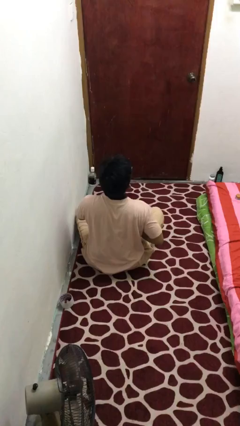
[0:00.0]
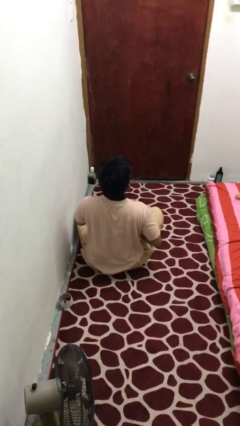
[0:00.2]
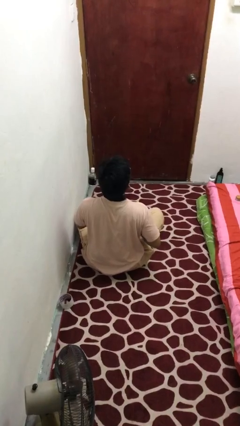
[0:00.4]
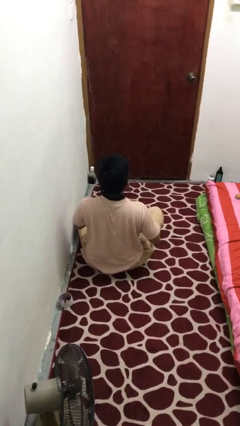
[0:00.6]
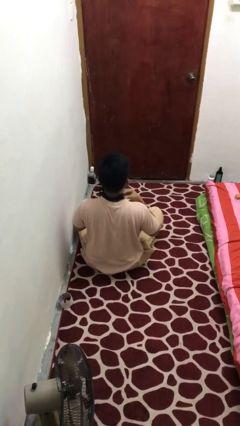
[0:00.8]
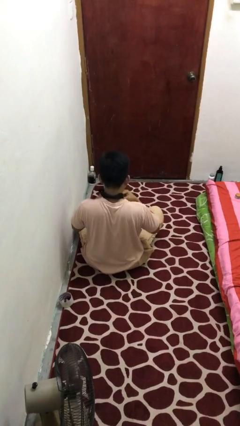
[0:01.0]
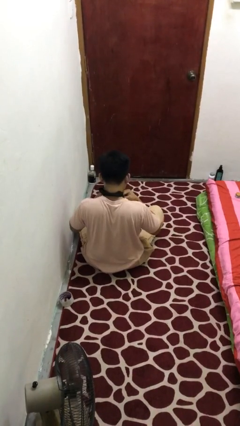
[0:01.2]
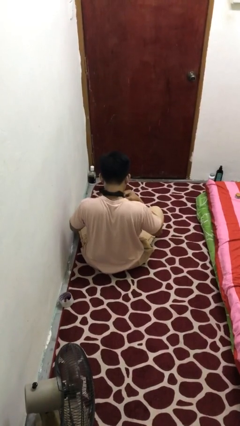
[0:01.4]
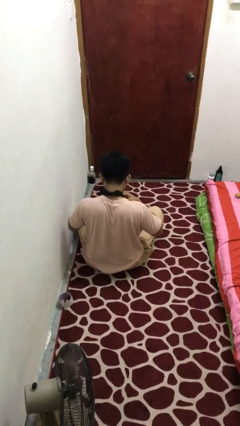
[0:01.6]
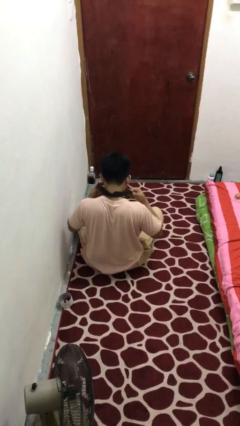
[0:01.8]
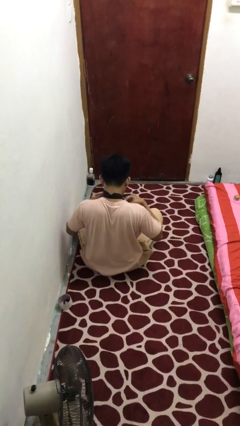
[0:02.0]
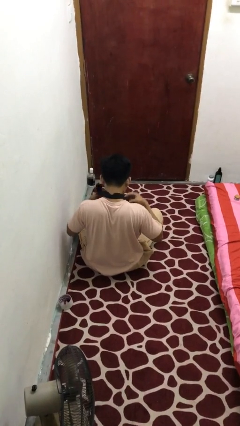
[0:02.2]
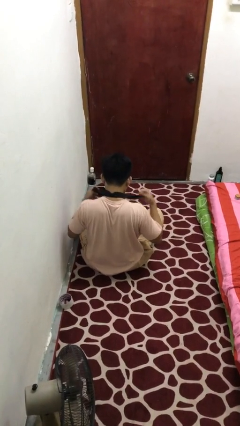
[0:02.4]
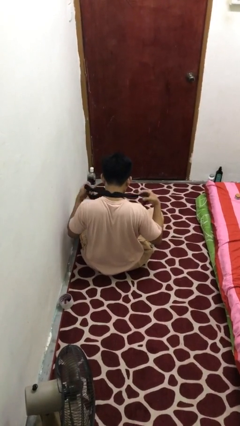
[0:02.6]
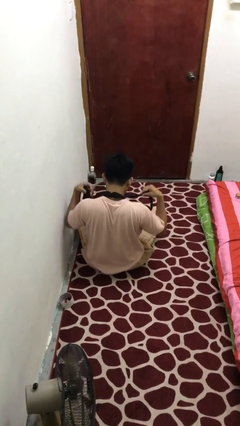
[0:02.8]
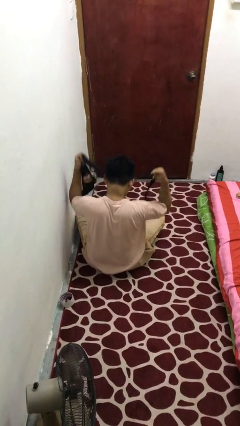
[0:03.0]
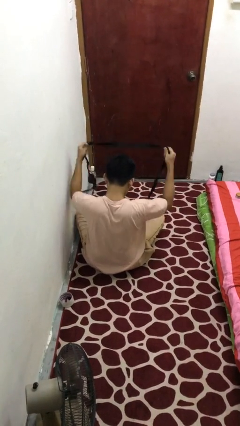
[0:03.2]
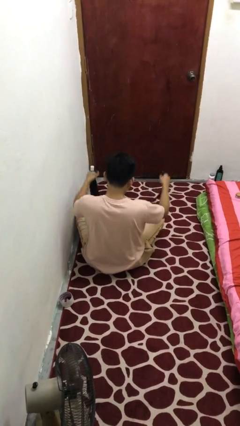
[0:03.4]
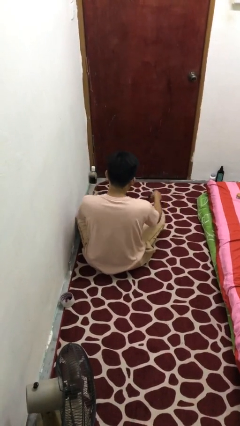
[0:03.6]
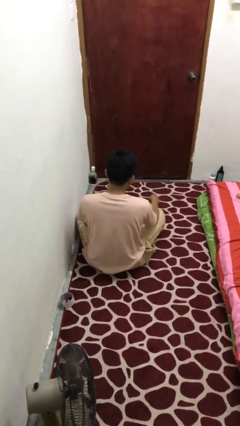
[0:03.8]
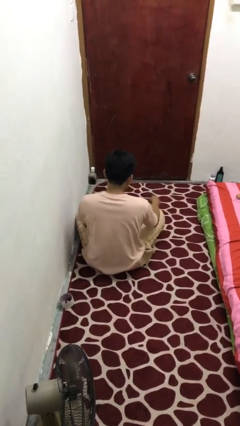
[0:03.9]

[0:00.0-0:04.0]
person takes off necktie

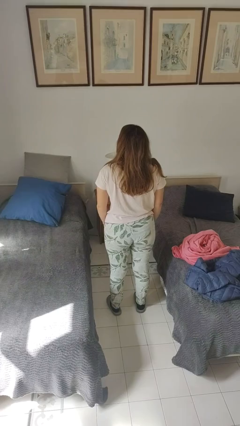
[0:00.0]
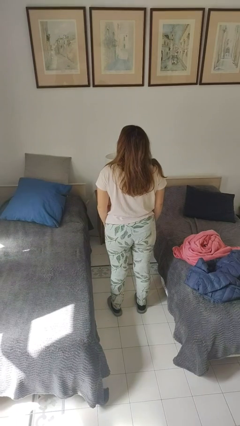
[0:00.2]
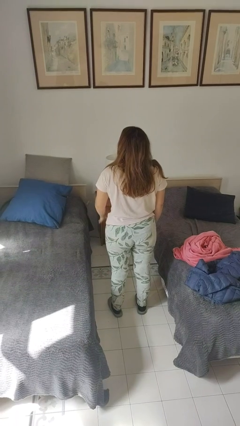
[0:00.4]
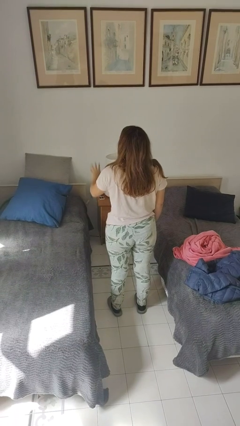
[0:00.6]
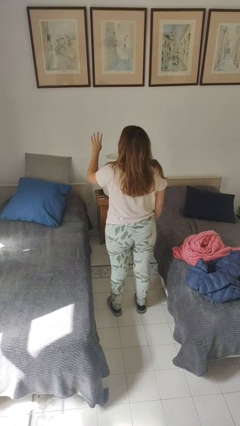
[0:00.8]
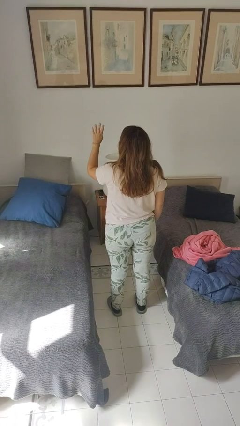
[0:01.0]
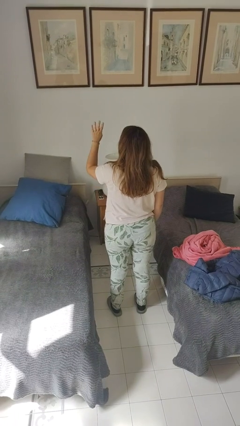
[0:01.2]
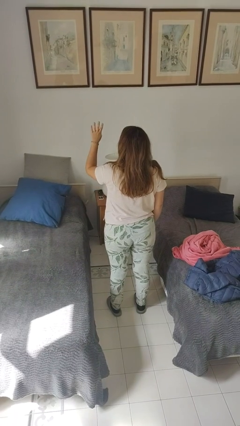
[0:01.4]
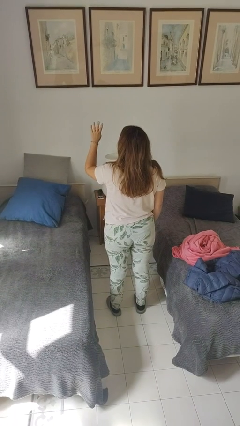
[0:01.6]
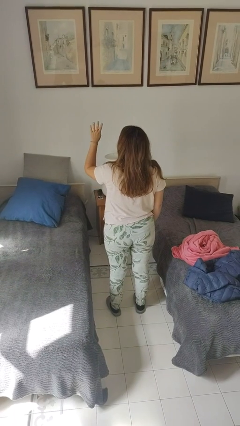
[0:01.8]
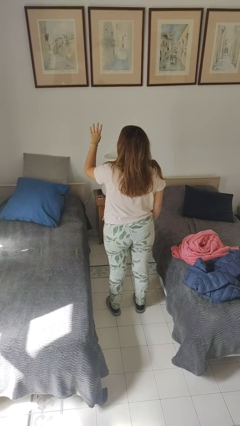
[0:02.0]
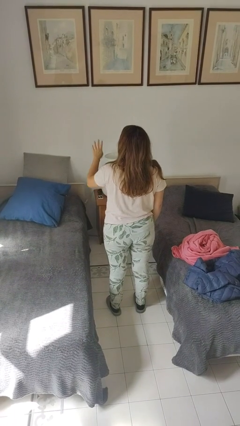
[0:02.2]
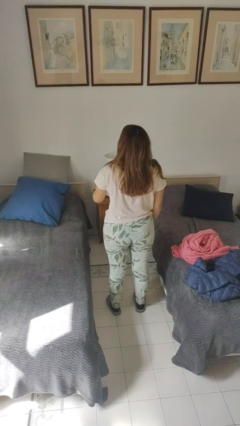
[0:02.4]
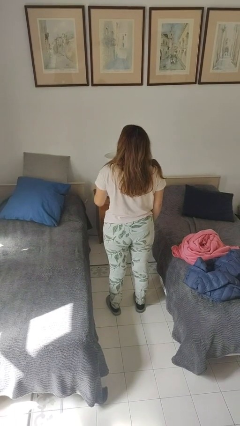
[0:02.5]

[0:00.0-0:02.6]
person gestures number four

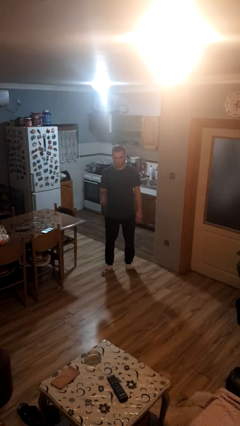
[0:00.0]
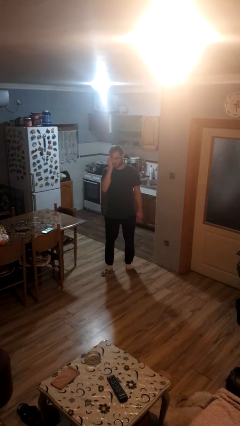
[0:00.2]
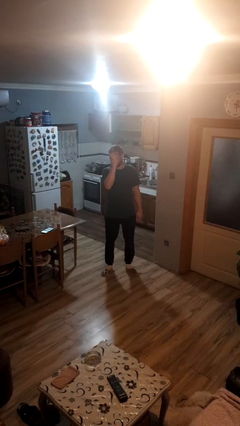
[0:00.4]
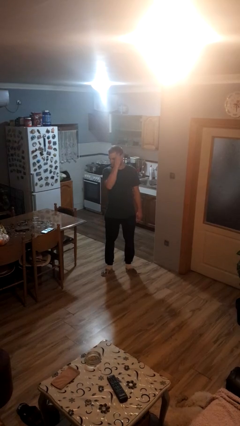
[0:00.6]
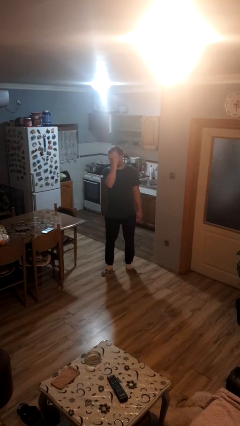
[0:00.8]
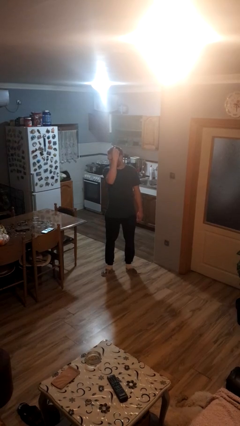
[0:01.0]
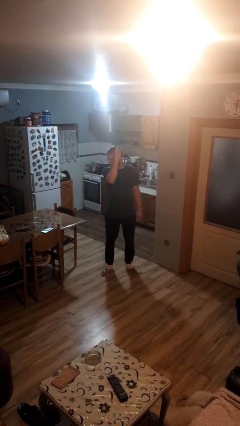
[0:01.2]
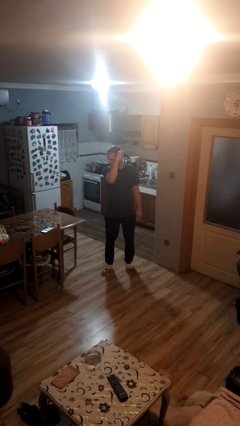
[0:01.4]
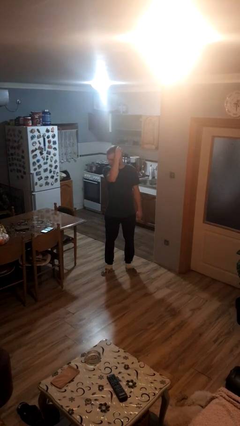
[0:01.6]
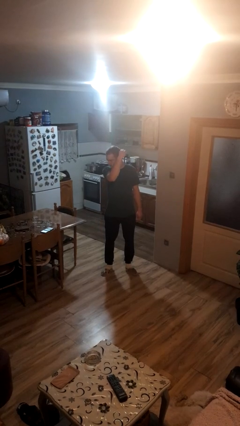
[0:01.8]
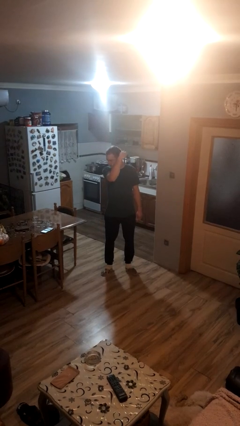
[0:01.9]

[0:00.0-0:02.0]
person brushes hair

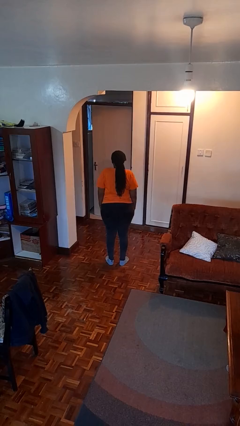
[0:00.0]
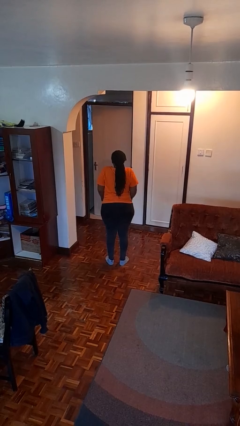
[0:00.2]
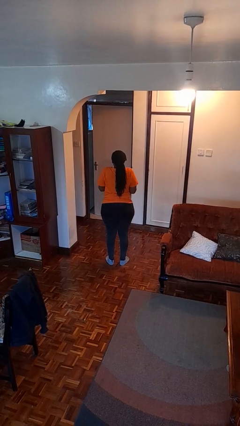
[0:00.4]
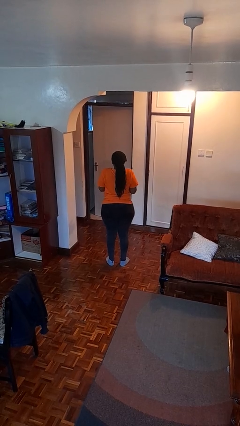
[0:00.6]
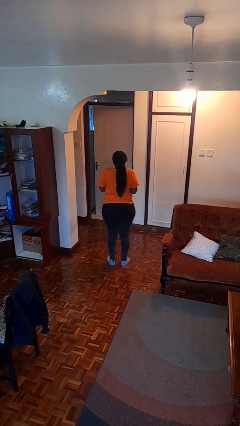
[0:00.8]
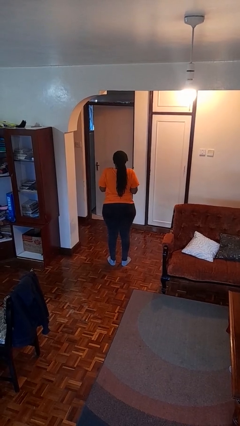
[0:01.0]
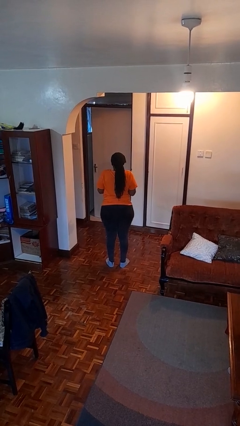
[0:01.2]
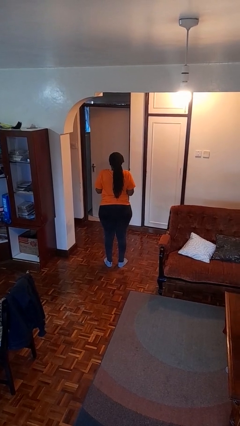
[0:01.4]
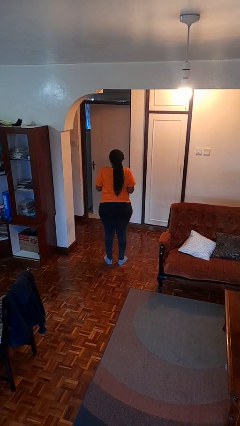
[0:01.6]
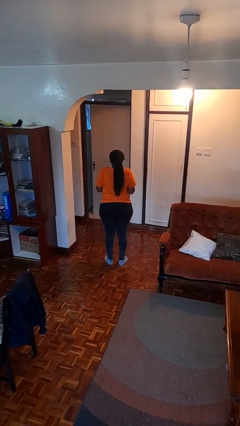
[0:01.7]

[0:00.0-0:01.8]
person shrugs

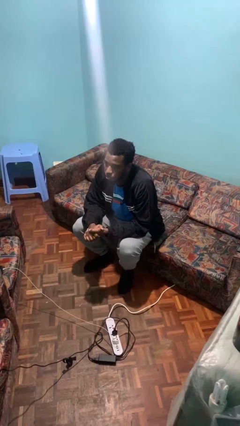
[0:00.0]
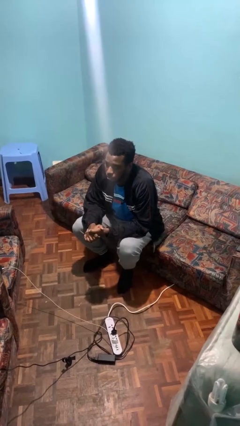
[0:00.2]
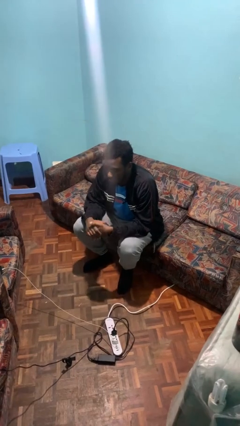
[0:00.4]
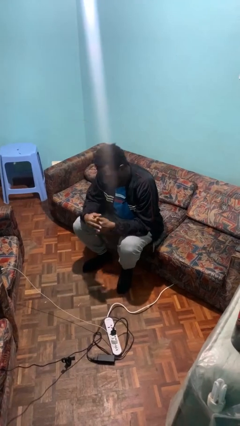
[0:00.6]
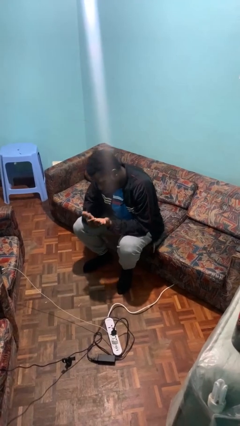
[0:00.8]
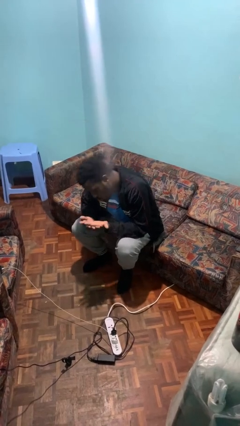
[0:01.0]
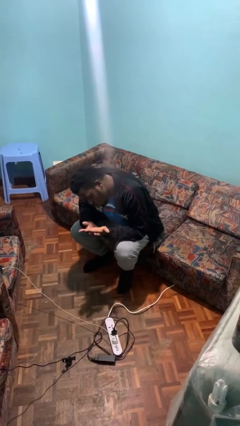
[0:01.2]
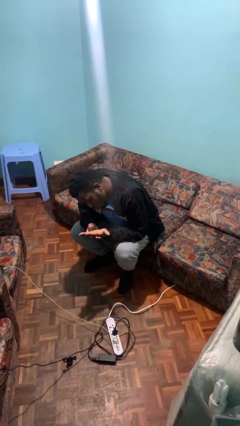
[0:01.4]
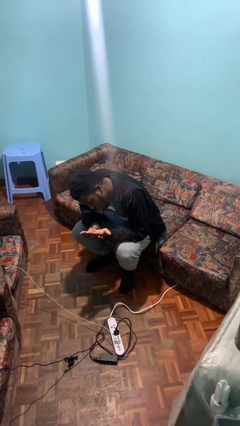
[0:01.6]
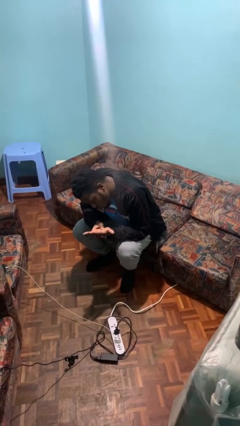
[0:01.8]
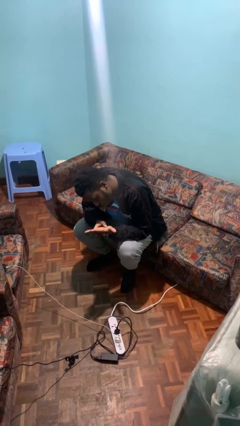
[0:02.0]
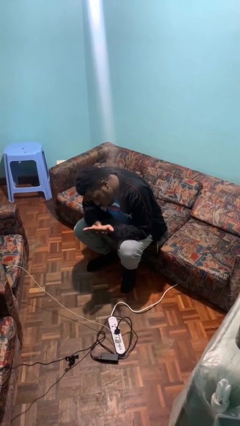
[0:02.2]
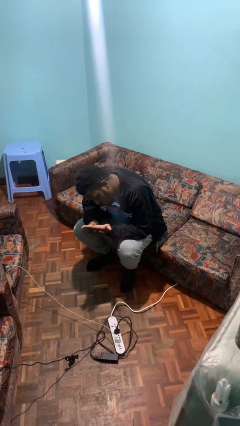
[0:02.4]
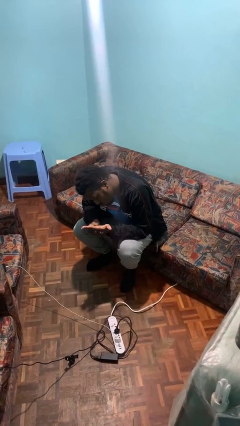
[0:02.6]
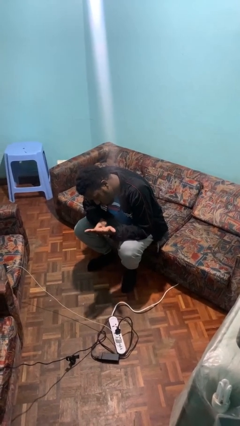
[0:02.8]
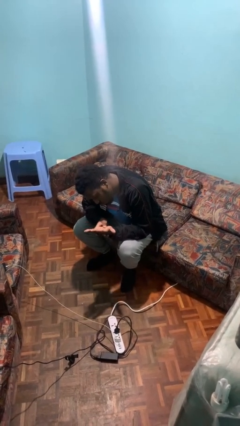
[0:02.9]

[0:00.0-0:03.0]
person looks at hands in lap

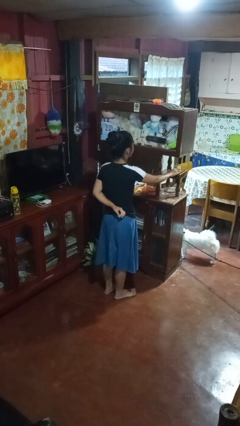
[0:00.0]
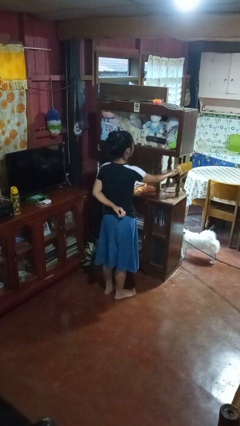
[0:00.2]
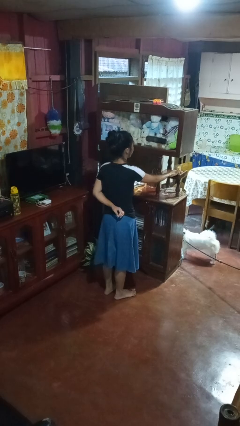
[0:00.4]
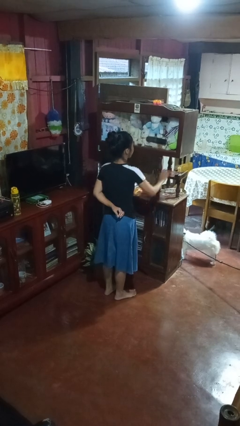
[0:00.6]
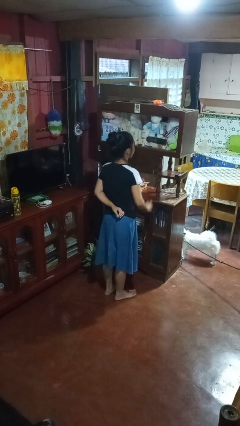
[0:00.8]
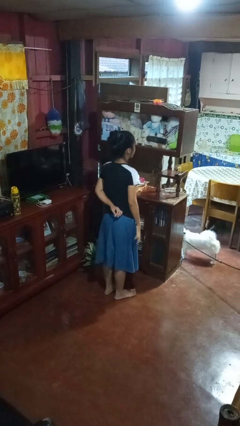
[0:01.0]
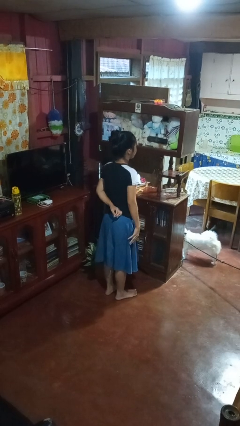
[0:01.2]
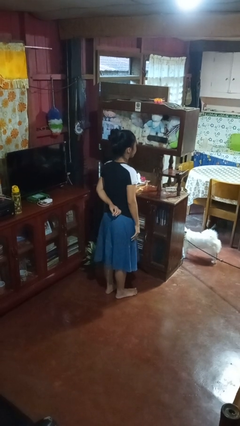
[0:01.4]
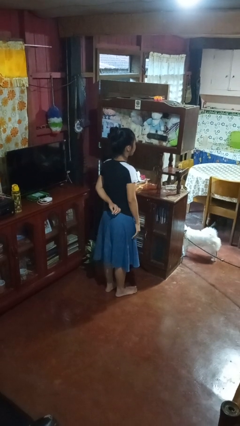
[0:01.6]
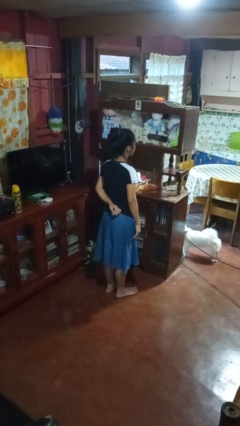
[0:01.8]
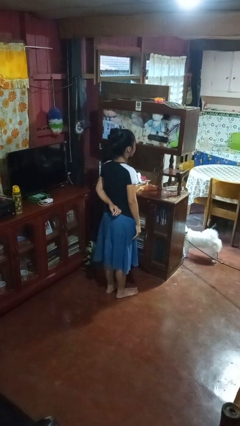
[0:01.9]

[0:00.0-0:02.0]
person puts down object on shelf

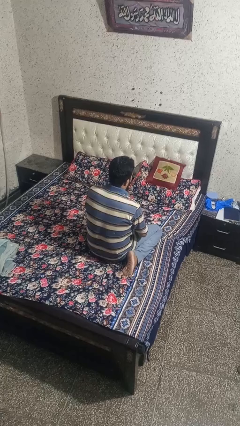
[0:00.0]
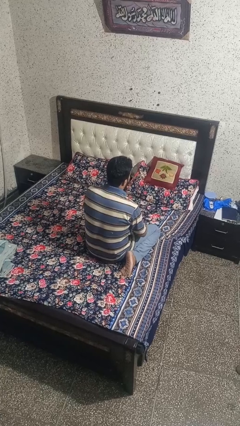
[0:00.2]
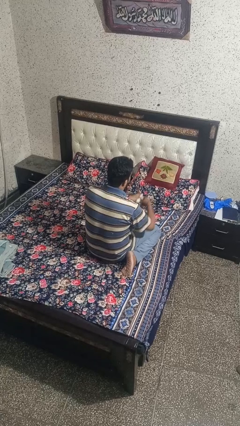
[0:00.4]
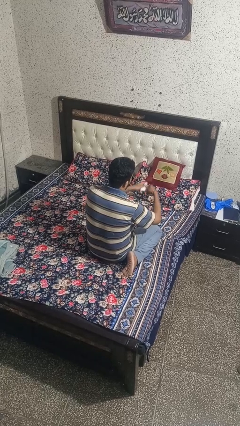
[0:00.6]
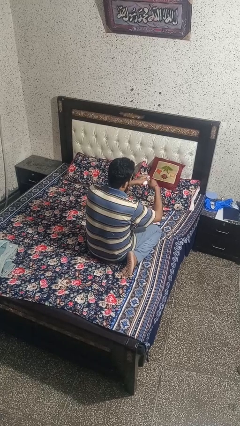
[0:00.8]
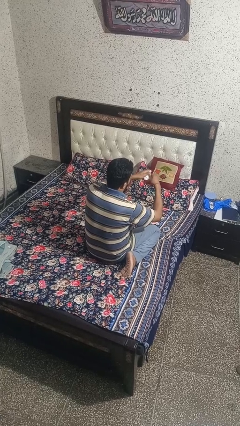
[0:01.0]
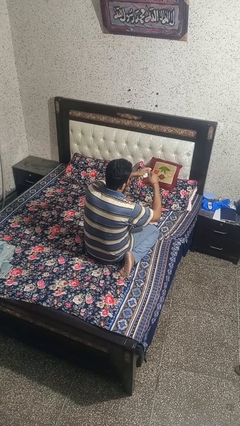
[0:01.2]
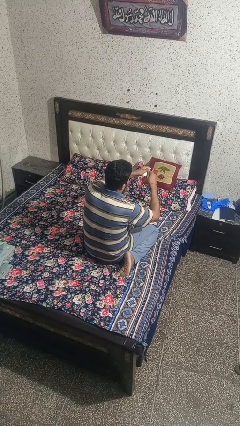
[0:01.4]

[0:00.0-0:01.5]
person tears paper

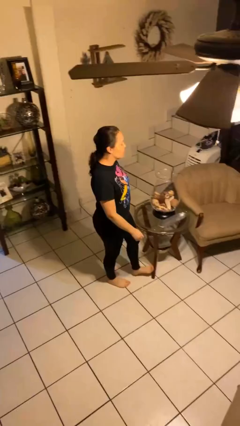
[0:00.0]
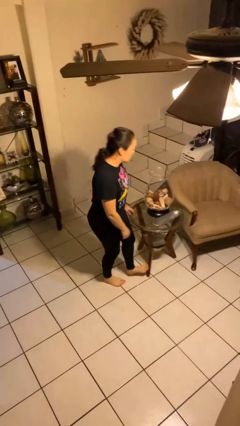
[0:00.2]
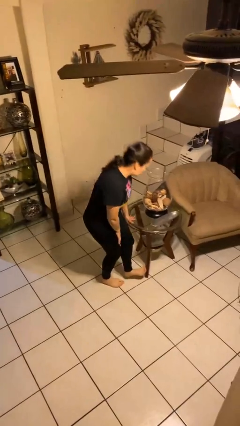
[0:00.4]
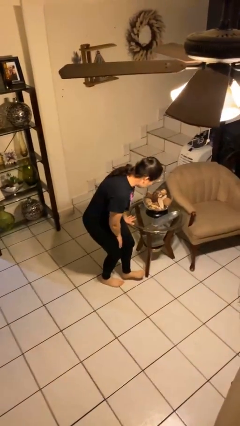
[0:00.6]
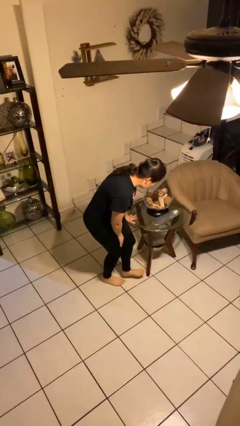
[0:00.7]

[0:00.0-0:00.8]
person stubs toe
